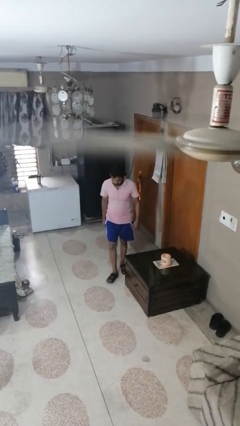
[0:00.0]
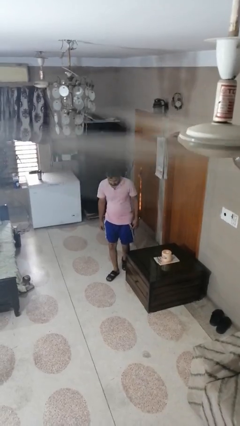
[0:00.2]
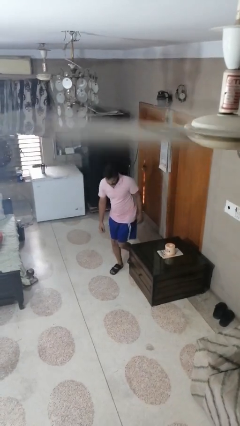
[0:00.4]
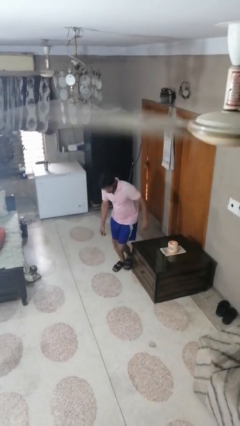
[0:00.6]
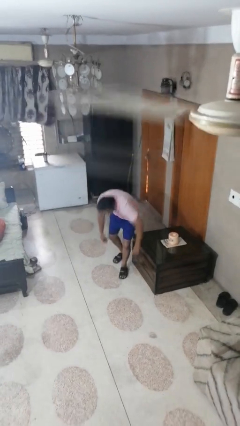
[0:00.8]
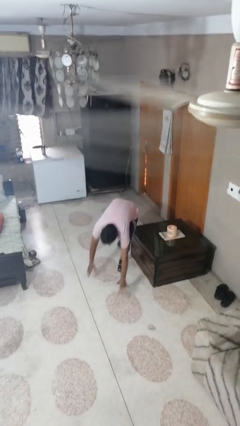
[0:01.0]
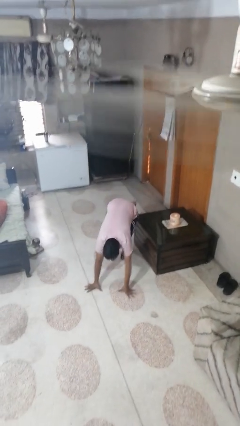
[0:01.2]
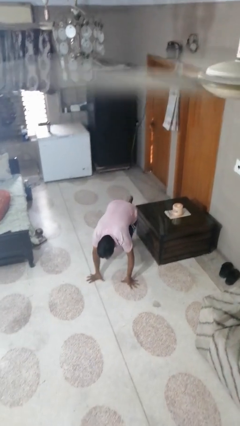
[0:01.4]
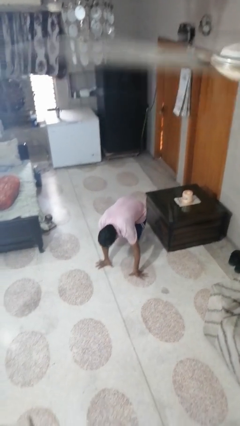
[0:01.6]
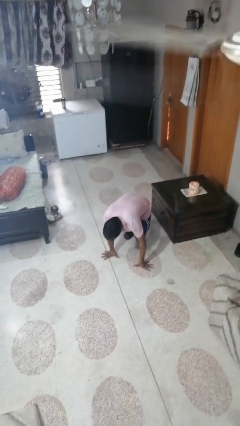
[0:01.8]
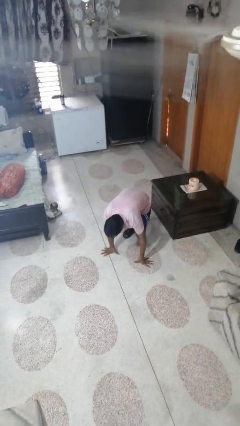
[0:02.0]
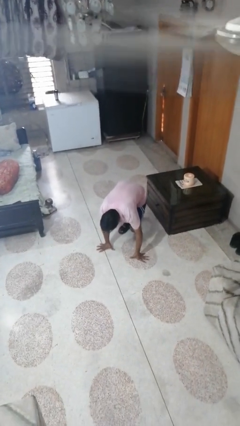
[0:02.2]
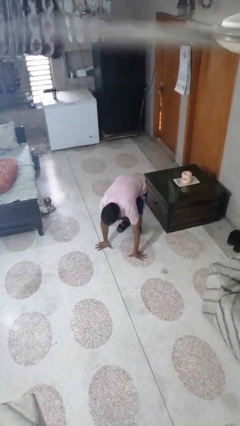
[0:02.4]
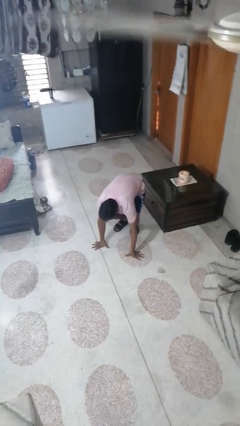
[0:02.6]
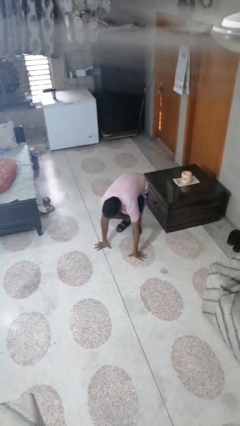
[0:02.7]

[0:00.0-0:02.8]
person bumps into table

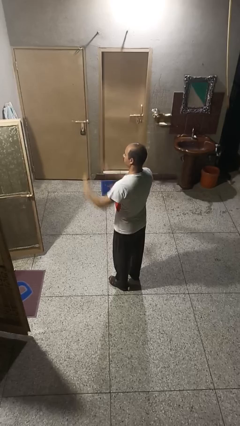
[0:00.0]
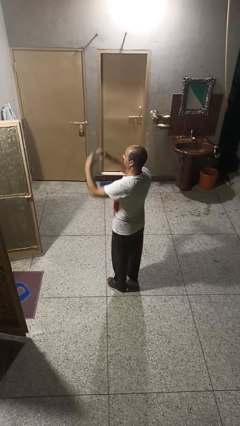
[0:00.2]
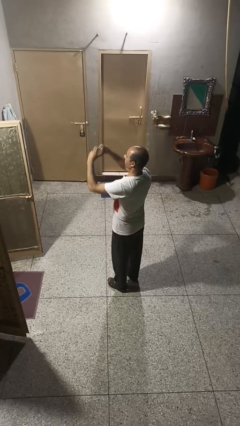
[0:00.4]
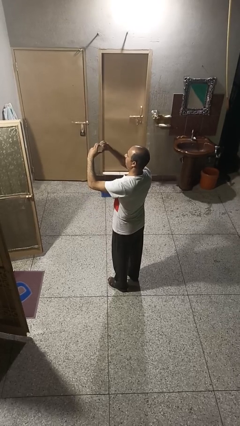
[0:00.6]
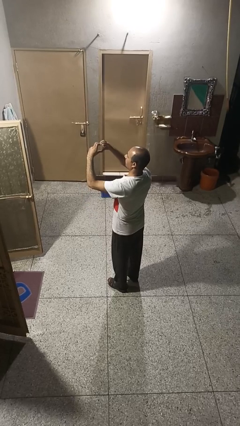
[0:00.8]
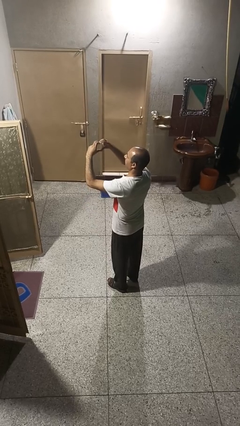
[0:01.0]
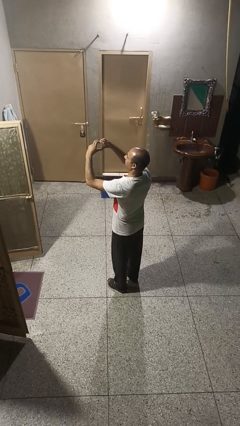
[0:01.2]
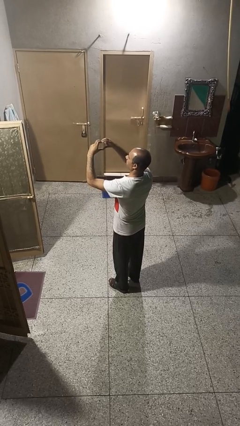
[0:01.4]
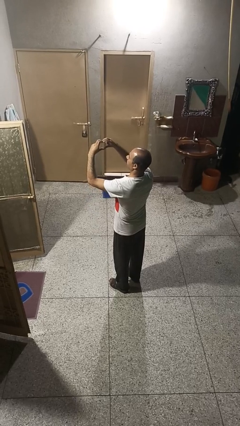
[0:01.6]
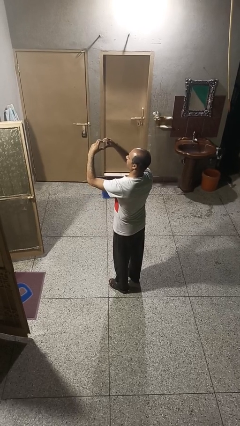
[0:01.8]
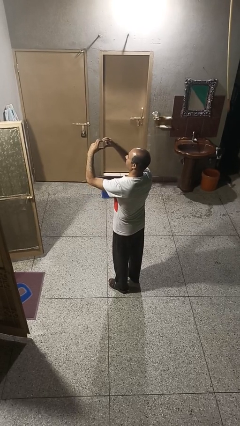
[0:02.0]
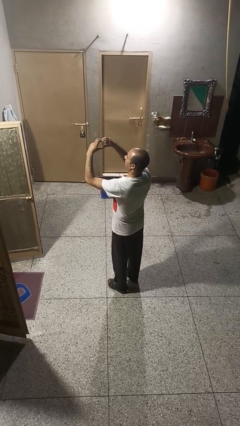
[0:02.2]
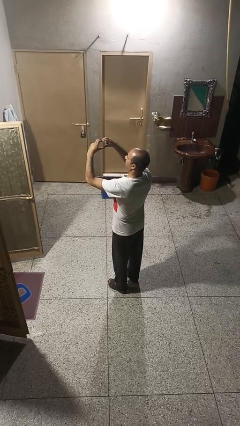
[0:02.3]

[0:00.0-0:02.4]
person gestures heart

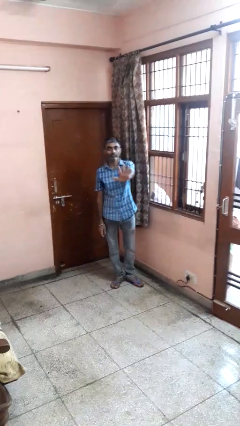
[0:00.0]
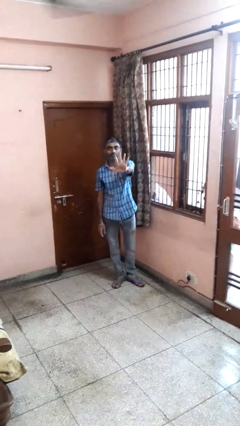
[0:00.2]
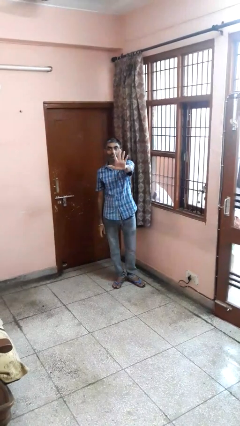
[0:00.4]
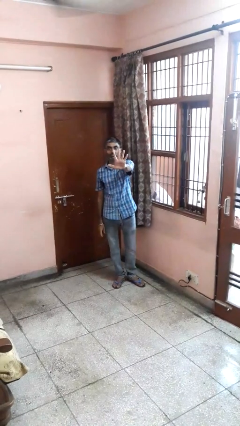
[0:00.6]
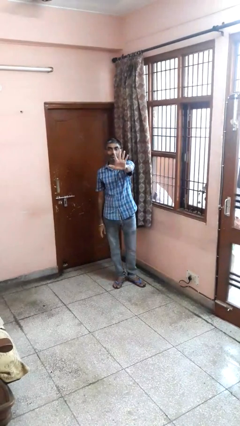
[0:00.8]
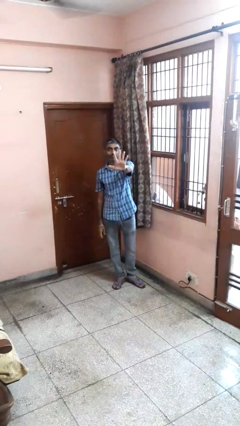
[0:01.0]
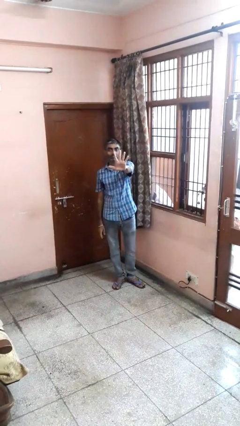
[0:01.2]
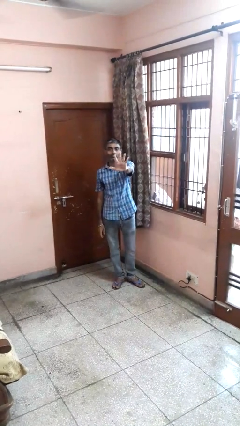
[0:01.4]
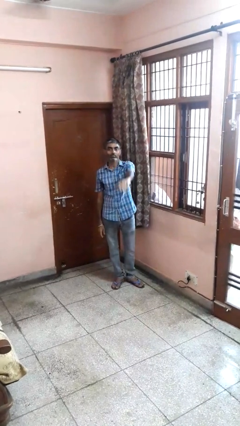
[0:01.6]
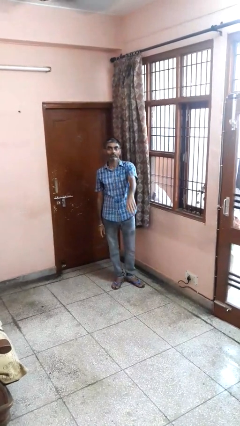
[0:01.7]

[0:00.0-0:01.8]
person gestures number five

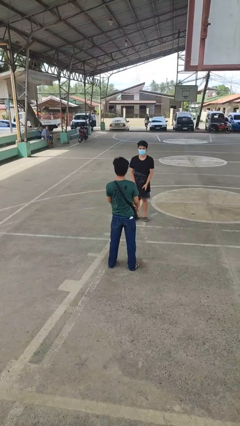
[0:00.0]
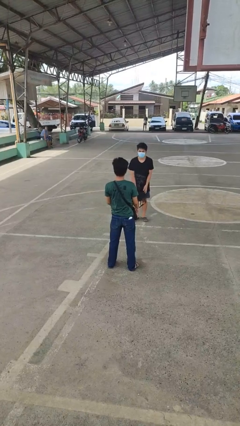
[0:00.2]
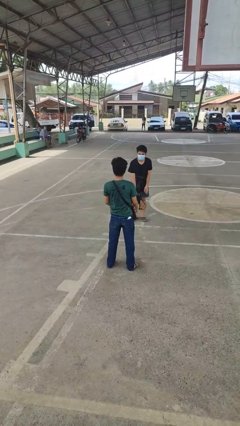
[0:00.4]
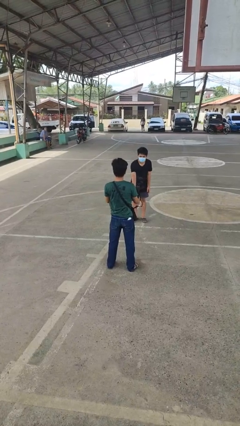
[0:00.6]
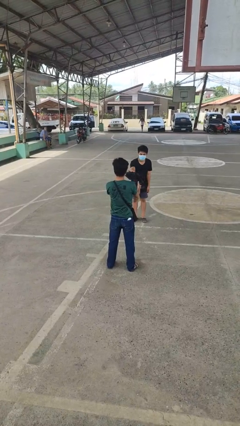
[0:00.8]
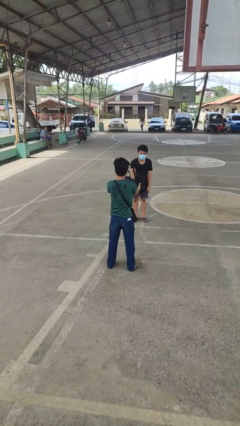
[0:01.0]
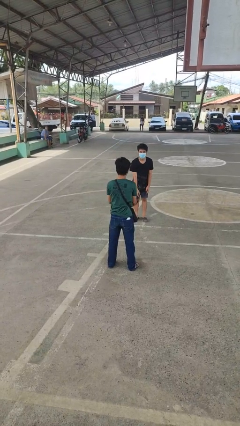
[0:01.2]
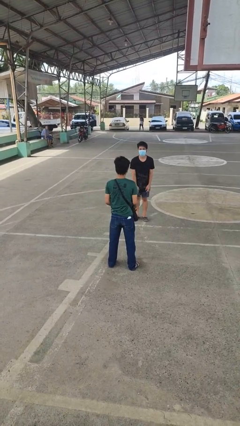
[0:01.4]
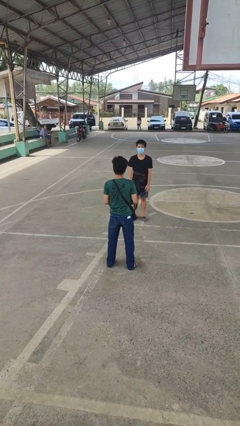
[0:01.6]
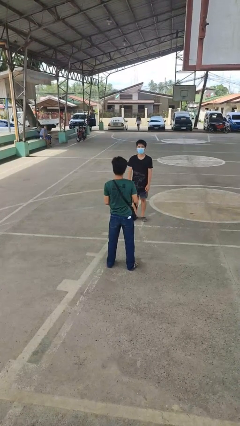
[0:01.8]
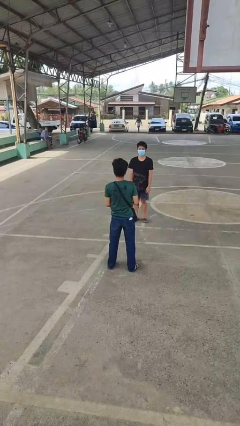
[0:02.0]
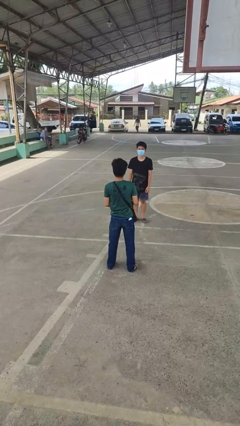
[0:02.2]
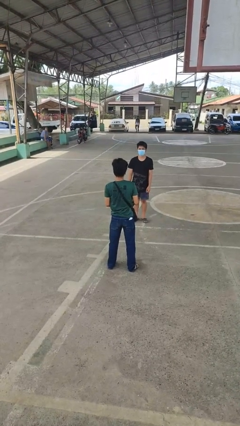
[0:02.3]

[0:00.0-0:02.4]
person catches object from person

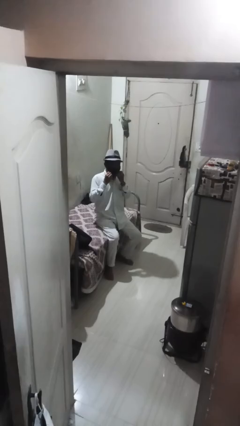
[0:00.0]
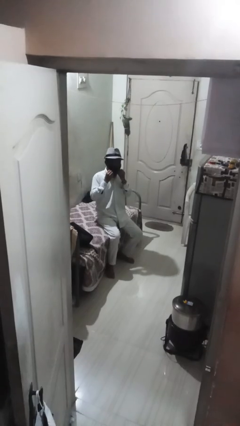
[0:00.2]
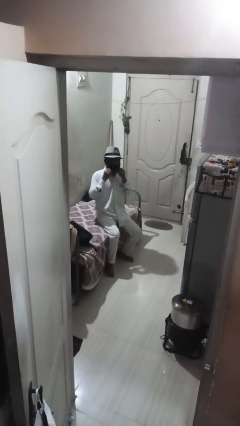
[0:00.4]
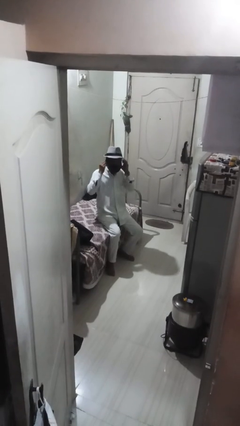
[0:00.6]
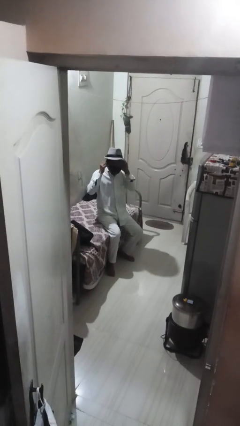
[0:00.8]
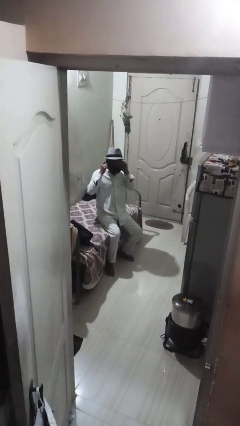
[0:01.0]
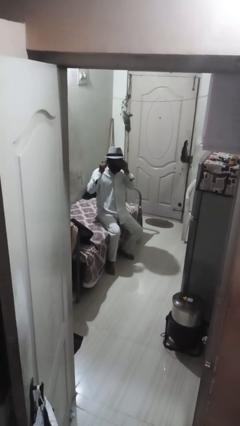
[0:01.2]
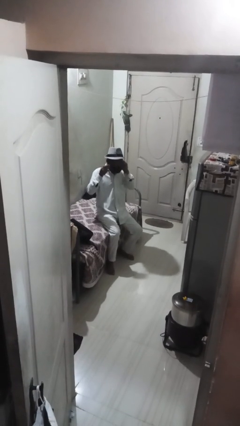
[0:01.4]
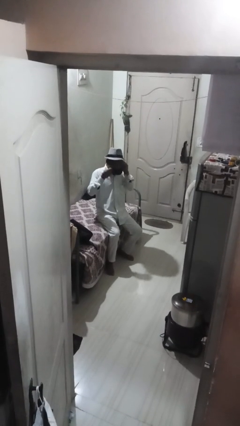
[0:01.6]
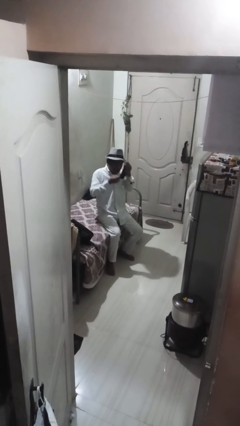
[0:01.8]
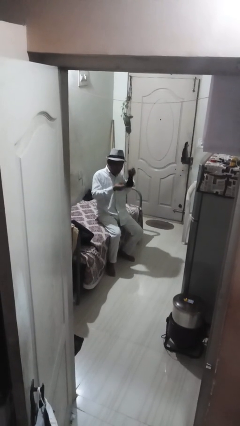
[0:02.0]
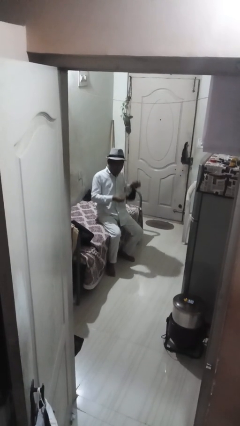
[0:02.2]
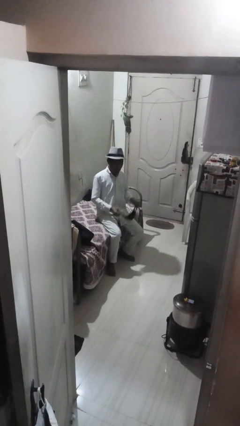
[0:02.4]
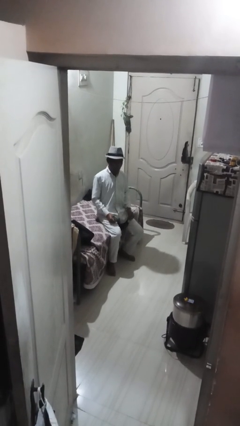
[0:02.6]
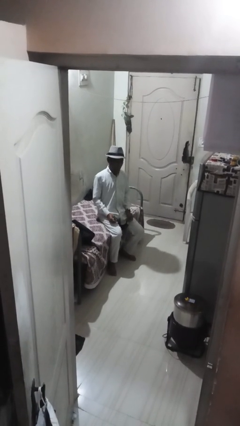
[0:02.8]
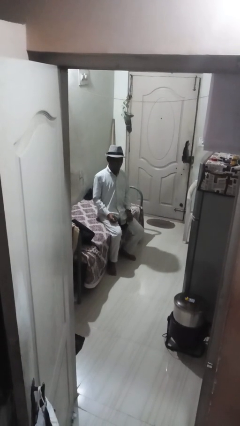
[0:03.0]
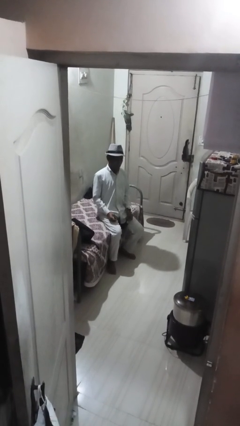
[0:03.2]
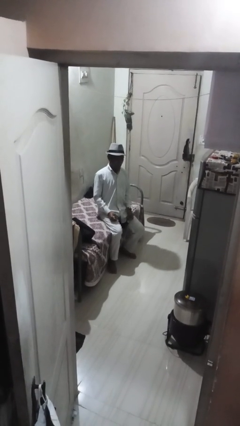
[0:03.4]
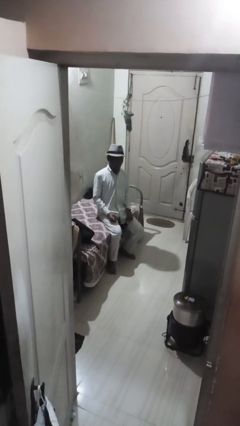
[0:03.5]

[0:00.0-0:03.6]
person takes off facemask

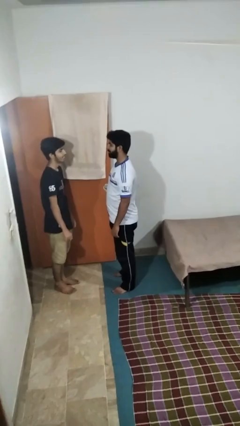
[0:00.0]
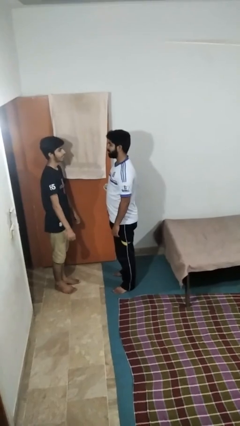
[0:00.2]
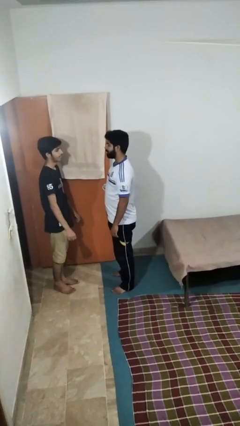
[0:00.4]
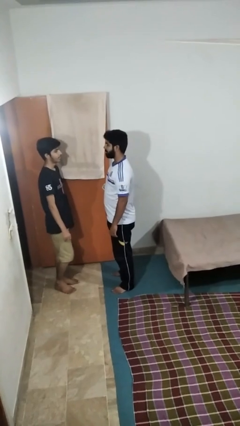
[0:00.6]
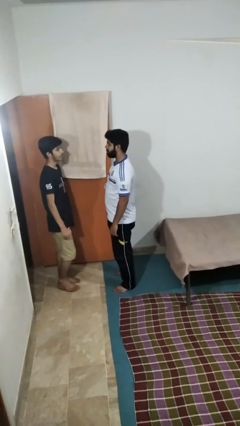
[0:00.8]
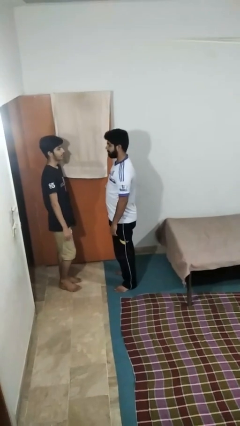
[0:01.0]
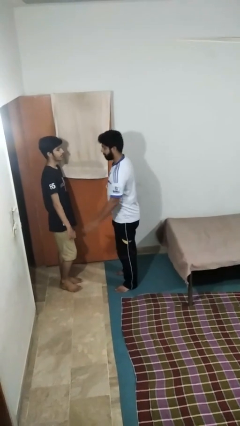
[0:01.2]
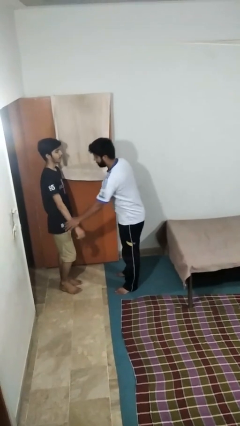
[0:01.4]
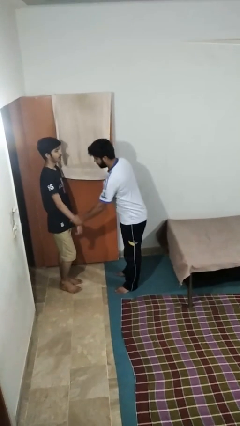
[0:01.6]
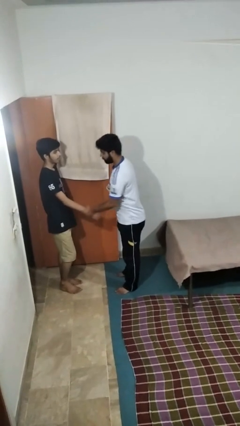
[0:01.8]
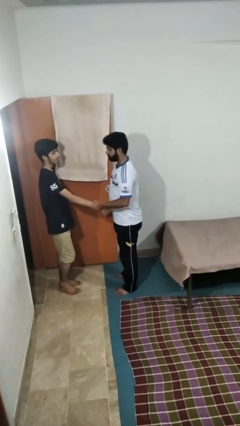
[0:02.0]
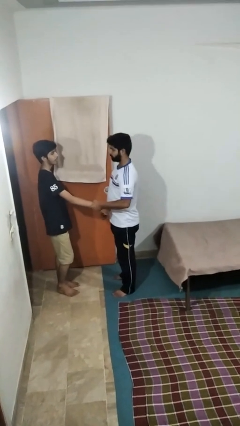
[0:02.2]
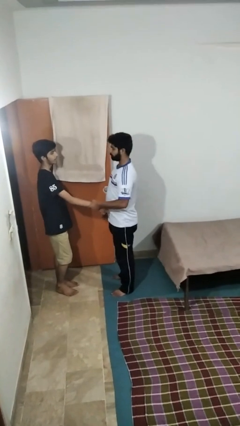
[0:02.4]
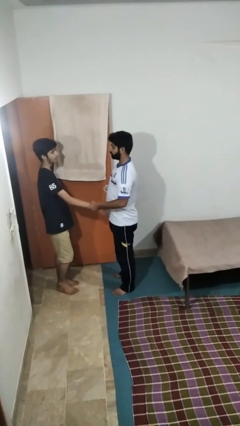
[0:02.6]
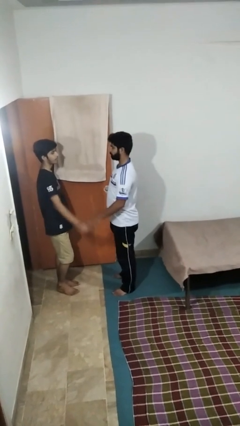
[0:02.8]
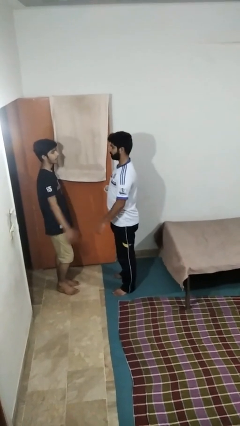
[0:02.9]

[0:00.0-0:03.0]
person grabs person by forearm

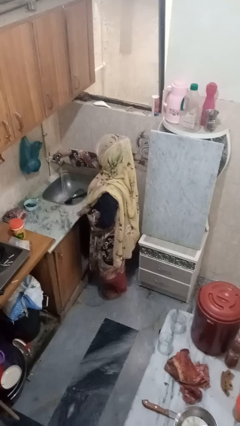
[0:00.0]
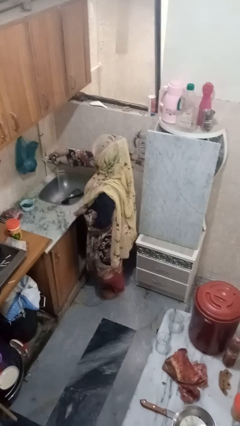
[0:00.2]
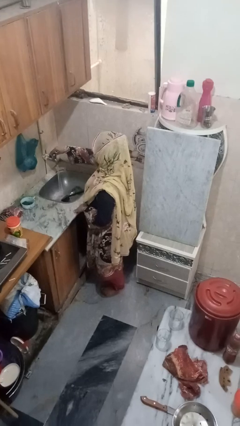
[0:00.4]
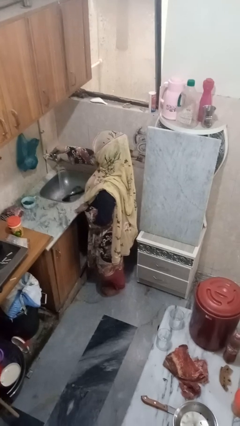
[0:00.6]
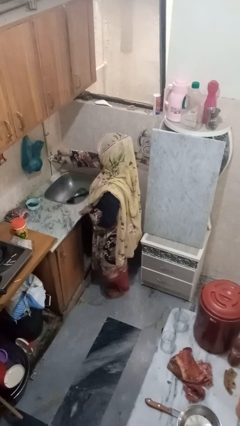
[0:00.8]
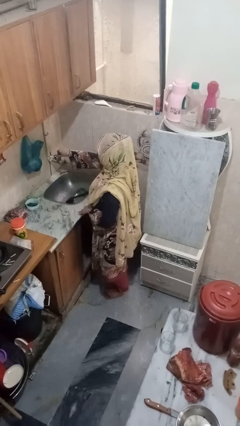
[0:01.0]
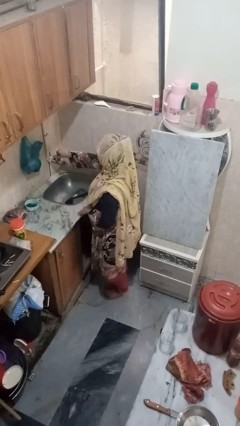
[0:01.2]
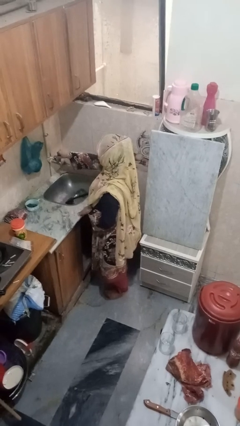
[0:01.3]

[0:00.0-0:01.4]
person turns off faucet
